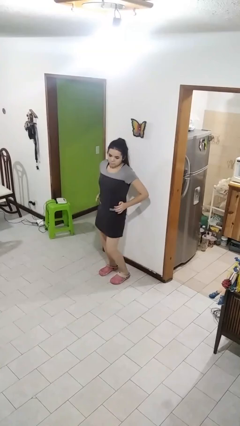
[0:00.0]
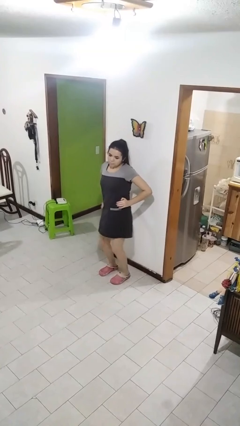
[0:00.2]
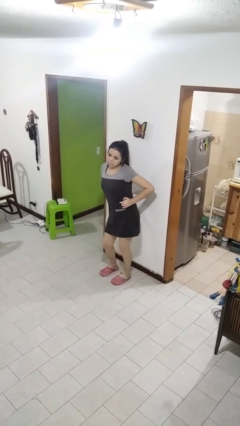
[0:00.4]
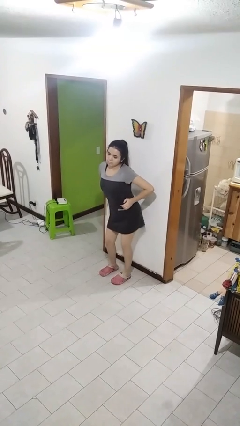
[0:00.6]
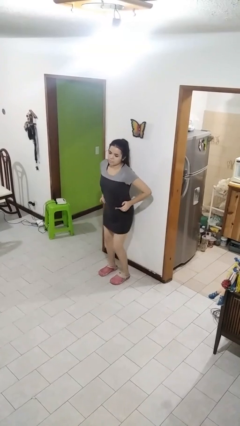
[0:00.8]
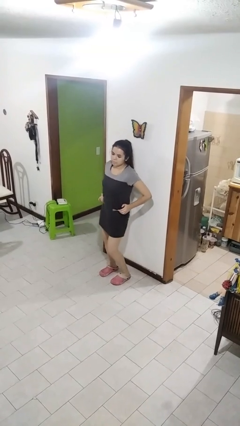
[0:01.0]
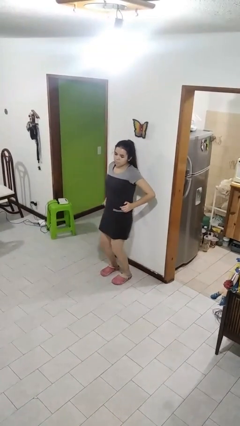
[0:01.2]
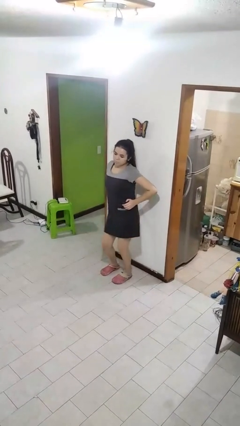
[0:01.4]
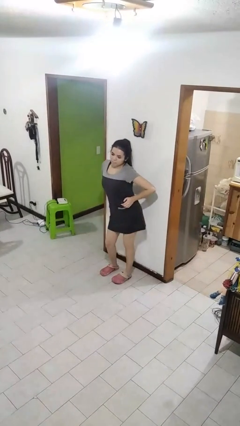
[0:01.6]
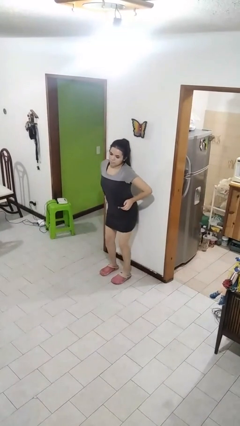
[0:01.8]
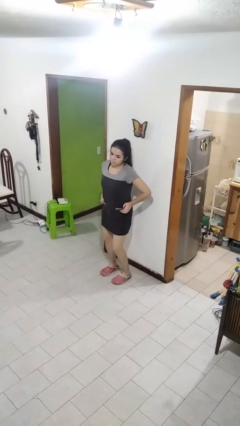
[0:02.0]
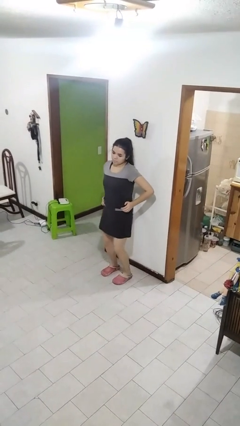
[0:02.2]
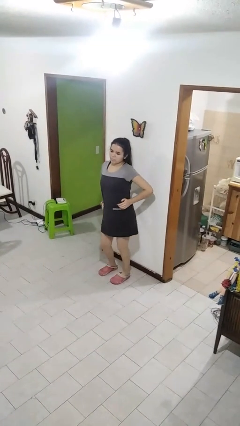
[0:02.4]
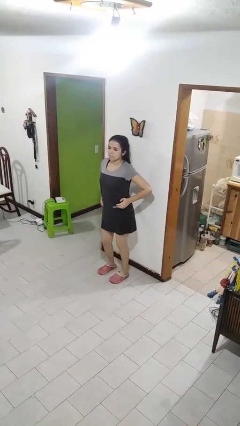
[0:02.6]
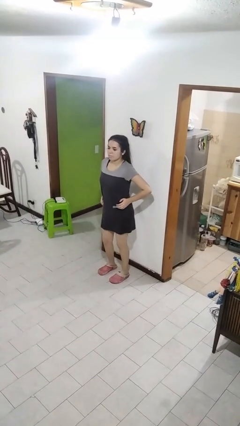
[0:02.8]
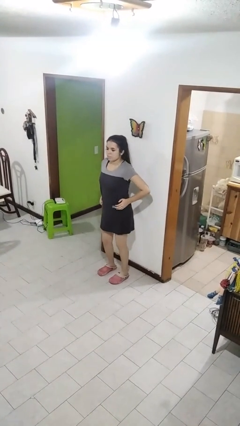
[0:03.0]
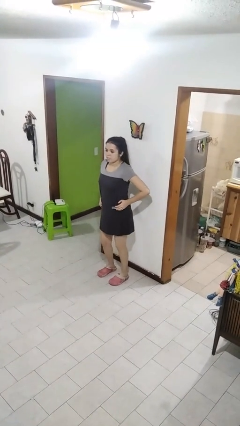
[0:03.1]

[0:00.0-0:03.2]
person wiggles hips

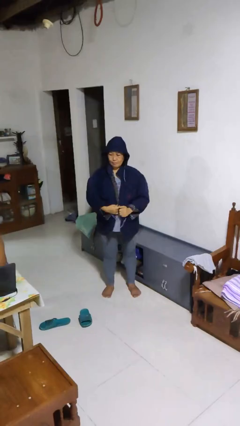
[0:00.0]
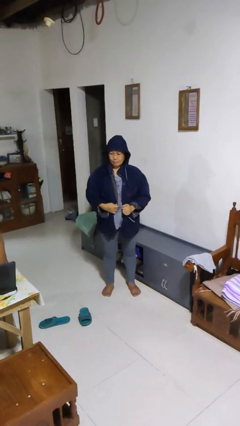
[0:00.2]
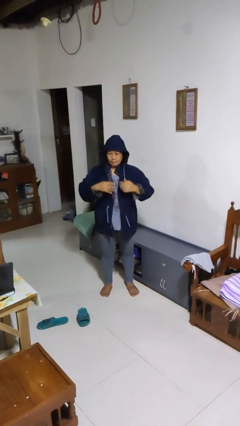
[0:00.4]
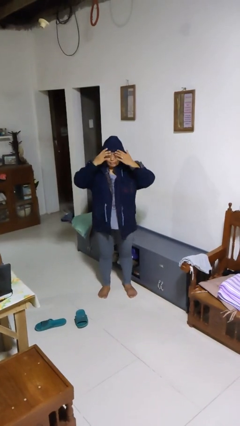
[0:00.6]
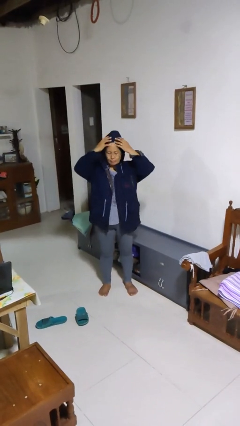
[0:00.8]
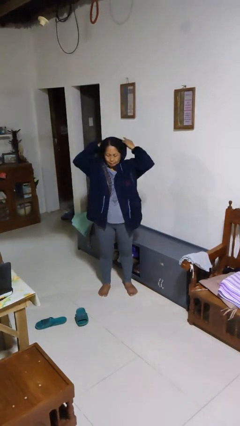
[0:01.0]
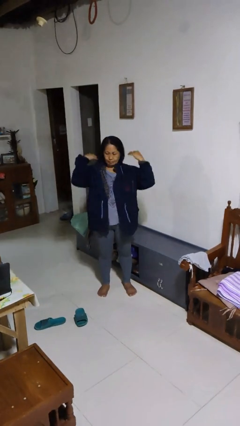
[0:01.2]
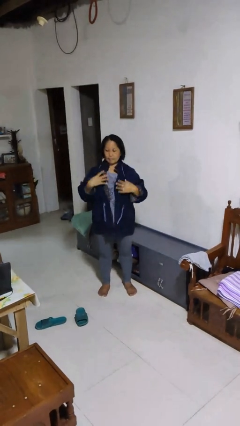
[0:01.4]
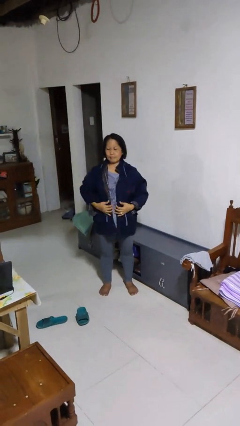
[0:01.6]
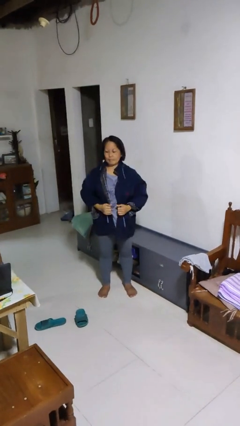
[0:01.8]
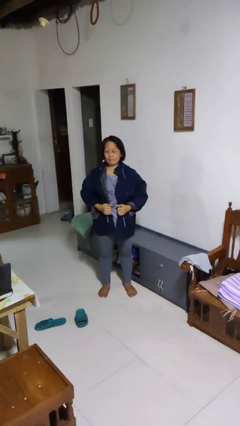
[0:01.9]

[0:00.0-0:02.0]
person takes off hoodie

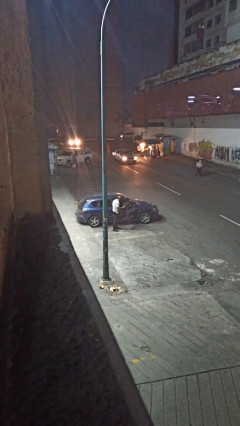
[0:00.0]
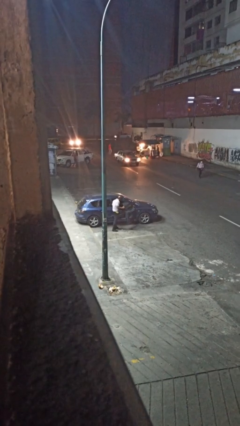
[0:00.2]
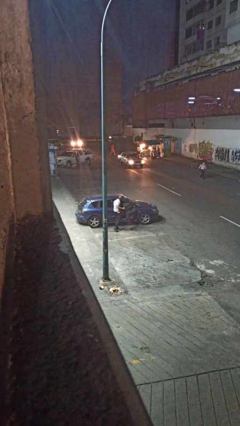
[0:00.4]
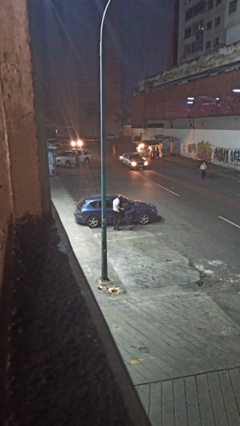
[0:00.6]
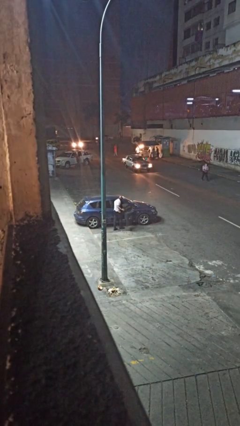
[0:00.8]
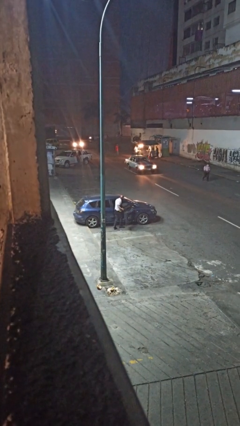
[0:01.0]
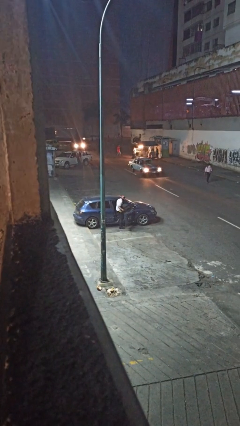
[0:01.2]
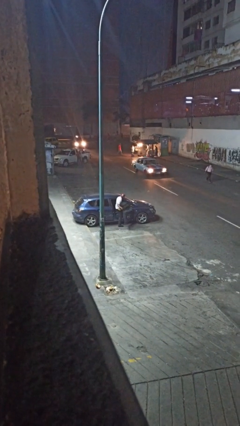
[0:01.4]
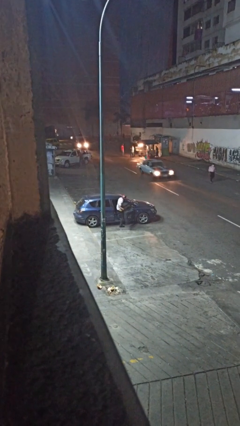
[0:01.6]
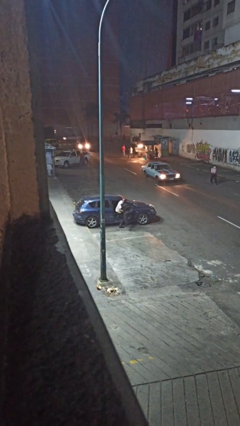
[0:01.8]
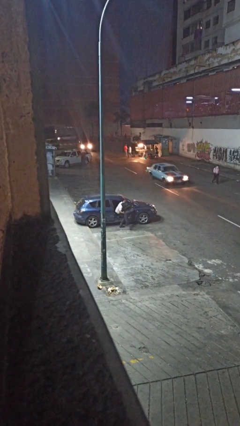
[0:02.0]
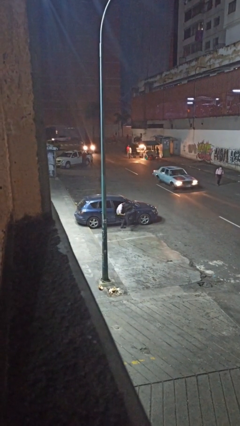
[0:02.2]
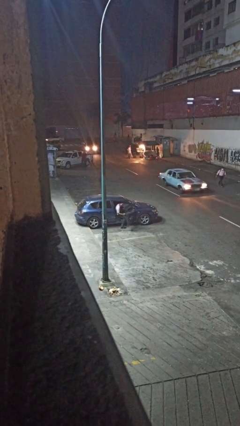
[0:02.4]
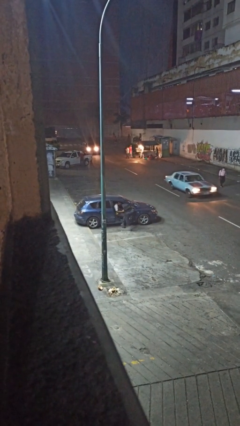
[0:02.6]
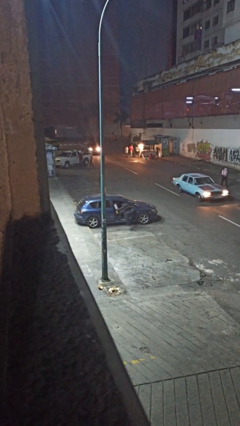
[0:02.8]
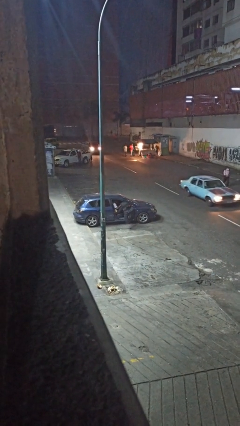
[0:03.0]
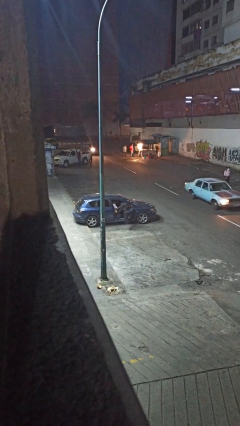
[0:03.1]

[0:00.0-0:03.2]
person enters car

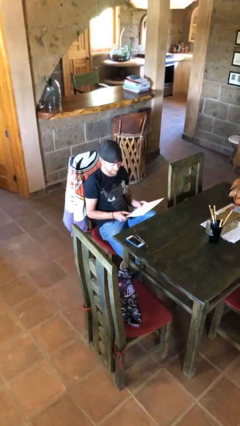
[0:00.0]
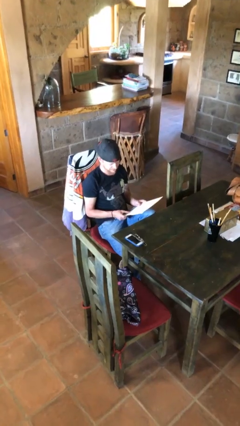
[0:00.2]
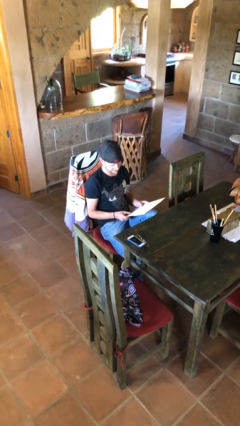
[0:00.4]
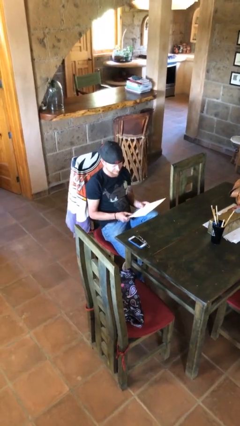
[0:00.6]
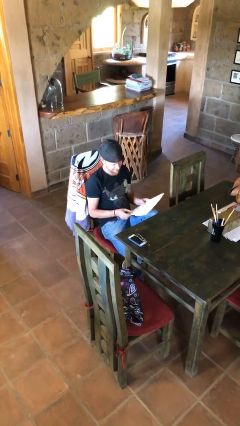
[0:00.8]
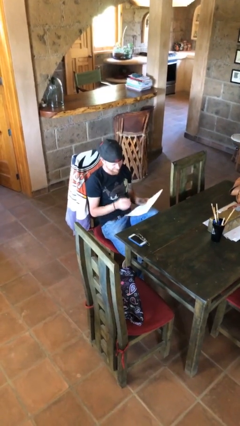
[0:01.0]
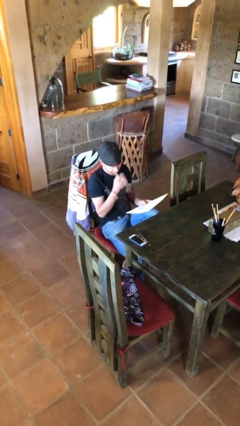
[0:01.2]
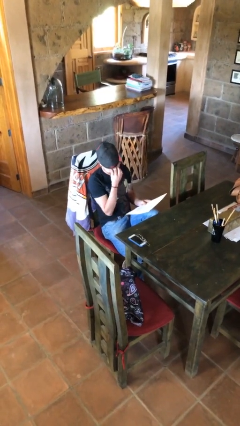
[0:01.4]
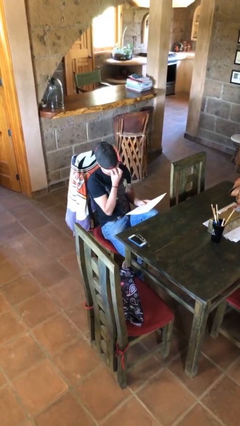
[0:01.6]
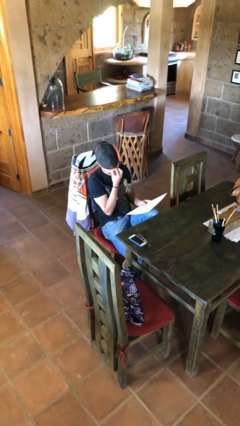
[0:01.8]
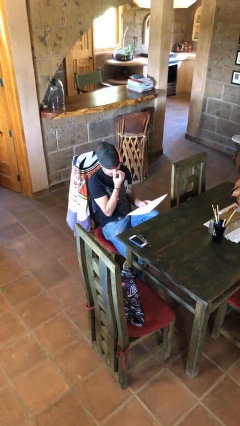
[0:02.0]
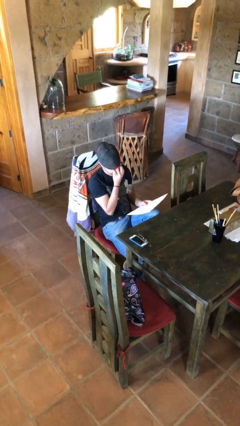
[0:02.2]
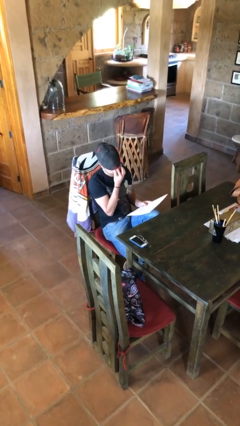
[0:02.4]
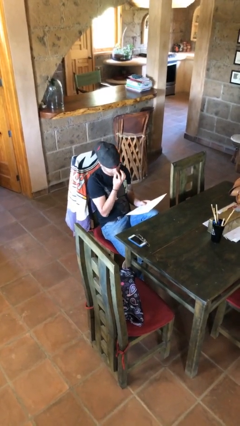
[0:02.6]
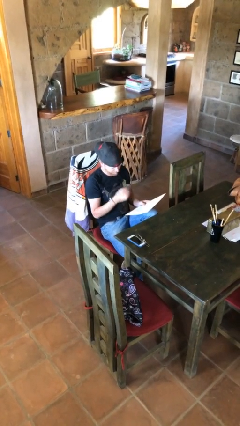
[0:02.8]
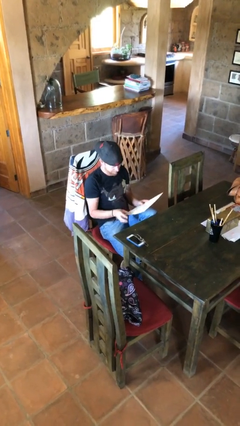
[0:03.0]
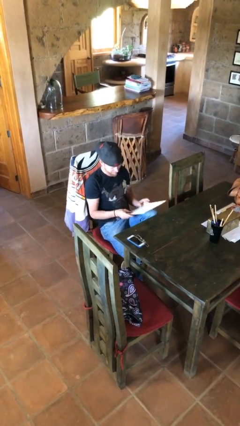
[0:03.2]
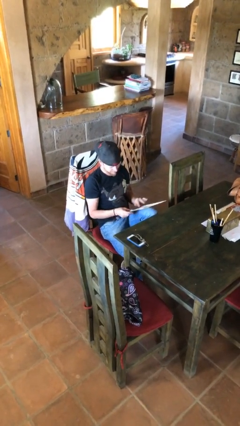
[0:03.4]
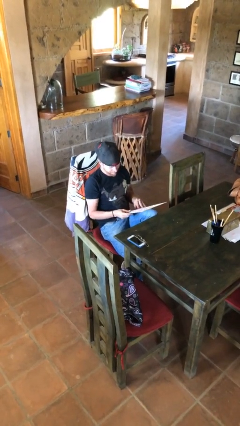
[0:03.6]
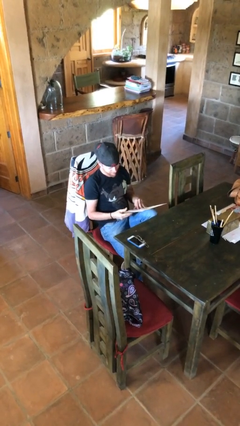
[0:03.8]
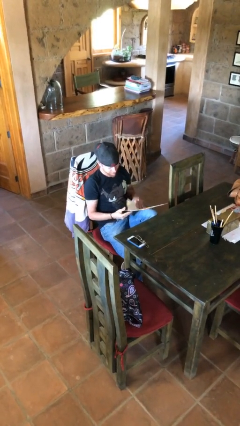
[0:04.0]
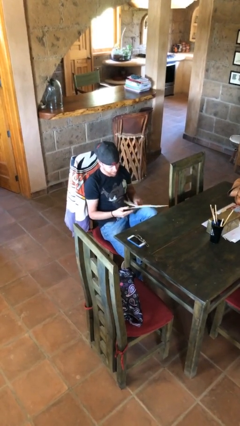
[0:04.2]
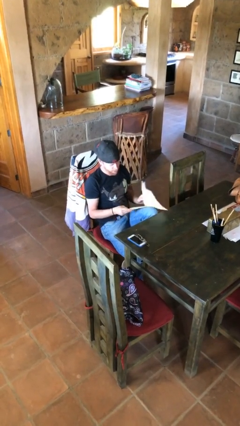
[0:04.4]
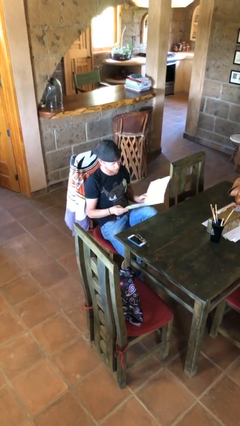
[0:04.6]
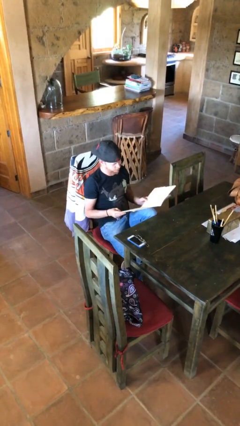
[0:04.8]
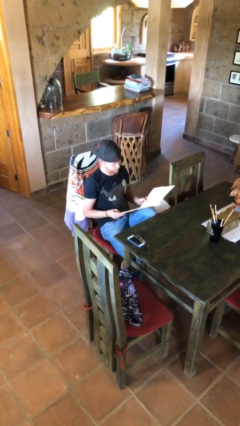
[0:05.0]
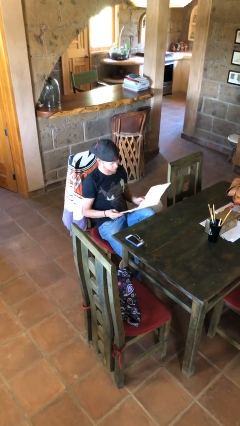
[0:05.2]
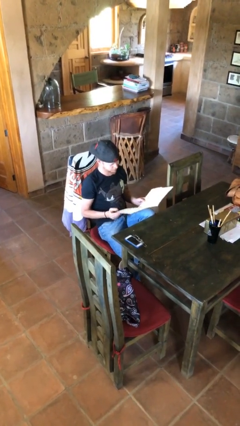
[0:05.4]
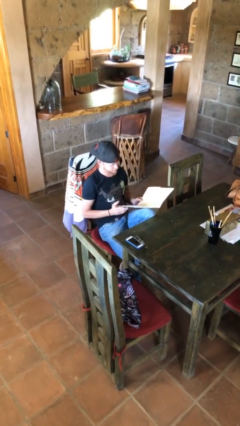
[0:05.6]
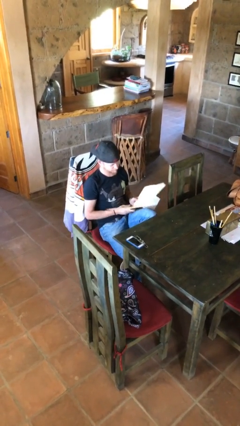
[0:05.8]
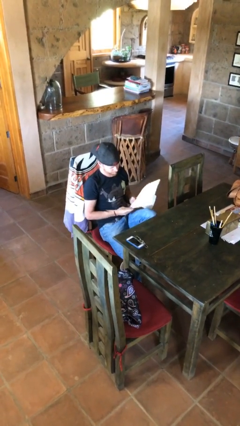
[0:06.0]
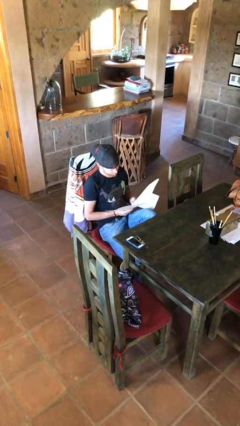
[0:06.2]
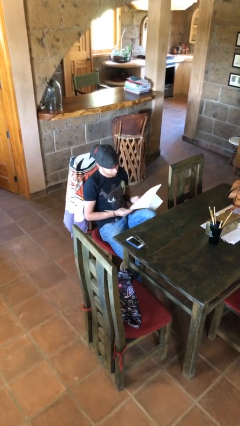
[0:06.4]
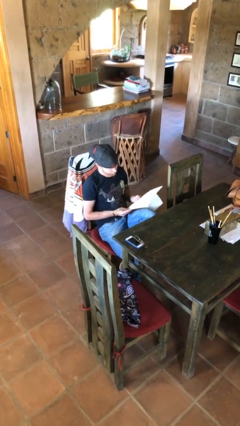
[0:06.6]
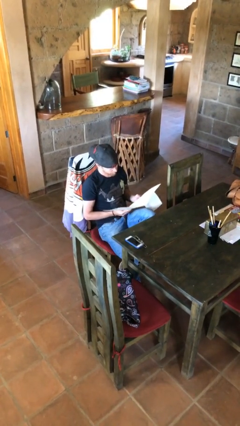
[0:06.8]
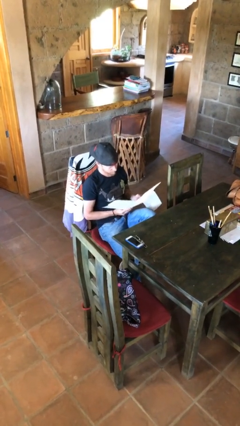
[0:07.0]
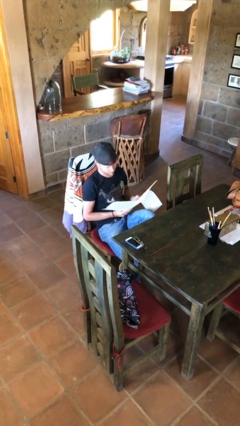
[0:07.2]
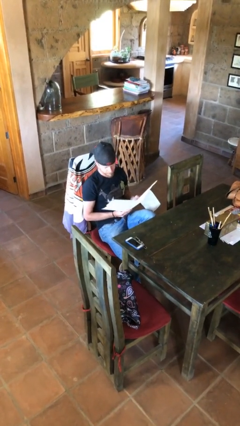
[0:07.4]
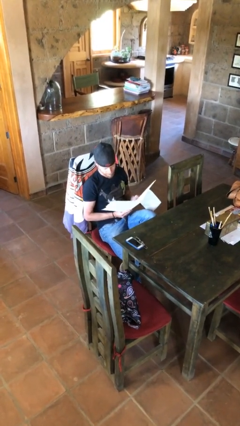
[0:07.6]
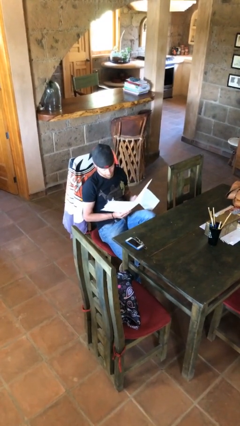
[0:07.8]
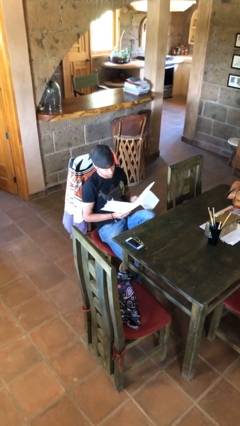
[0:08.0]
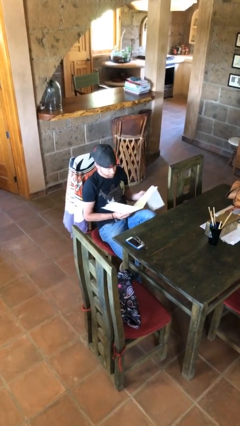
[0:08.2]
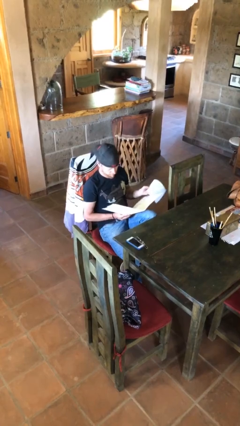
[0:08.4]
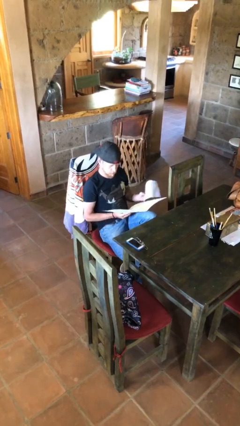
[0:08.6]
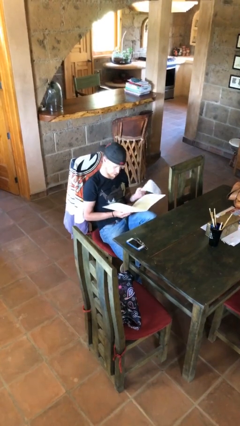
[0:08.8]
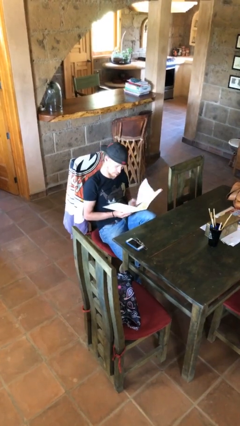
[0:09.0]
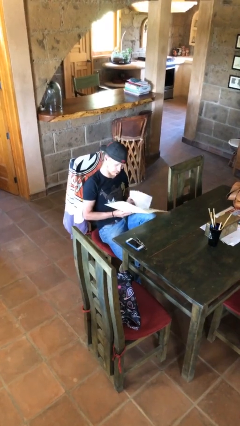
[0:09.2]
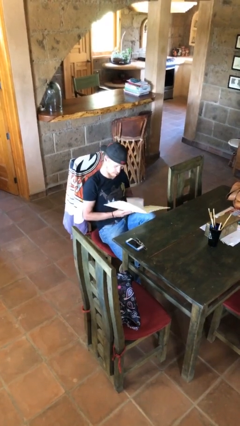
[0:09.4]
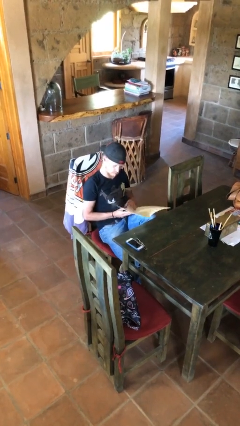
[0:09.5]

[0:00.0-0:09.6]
person reads document

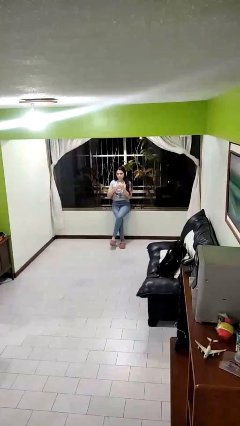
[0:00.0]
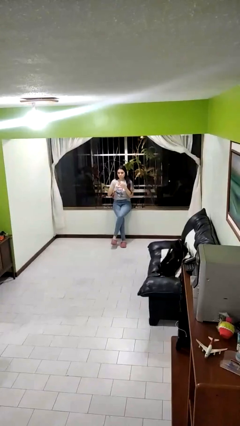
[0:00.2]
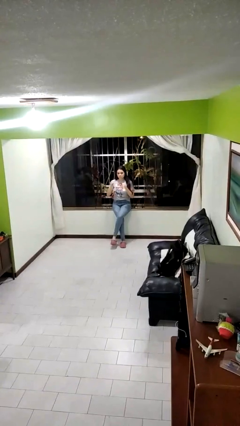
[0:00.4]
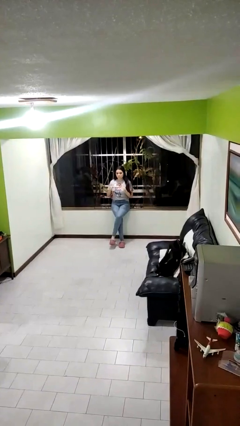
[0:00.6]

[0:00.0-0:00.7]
person takes off ring
